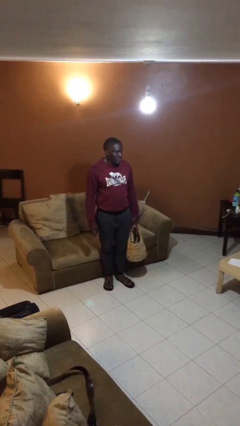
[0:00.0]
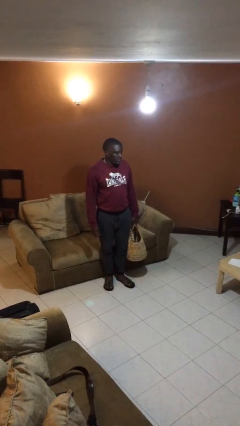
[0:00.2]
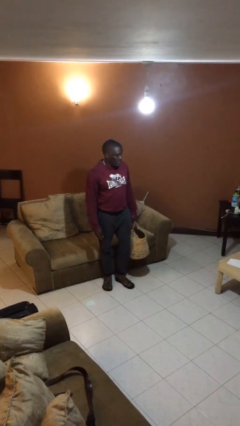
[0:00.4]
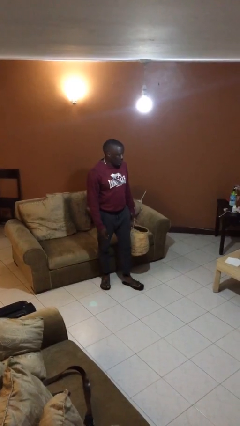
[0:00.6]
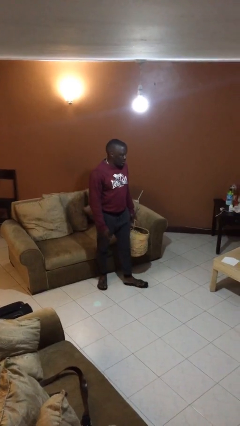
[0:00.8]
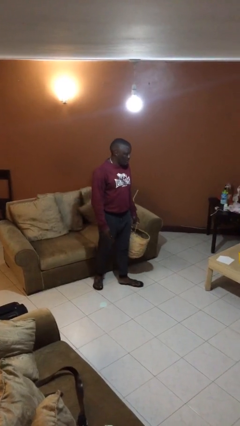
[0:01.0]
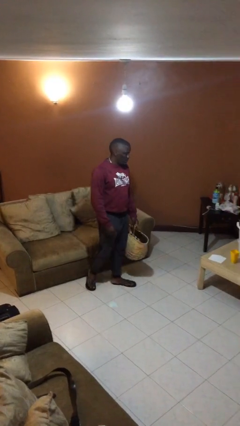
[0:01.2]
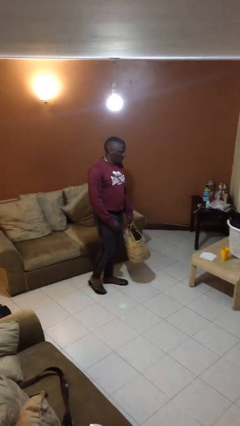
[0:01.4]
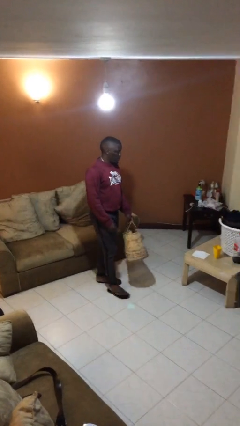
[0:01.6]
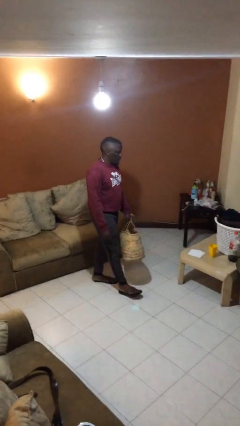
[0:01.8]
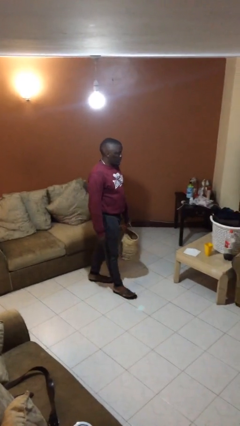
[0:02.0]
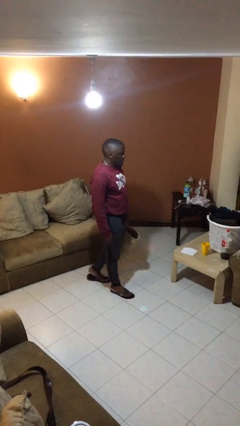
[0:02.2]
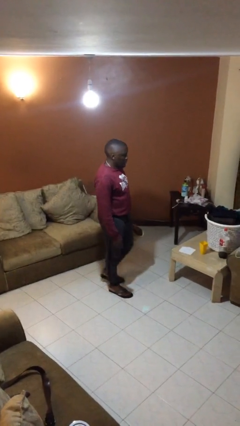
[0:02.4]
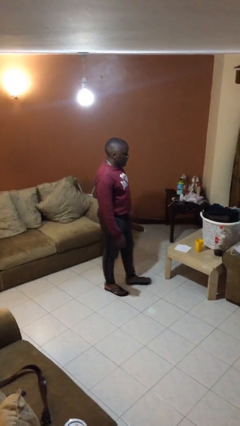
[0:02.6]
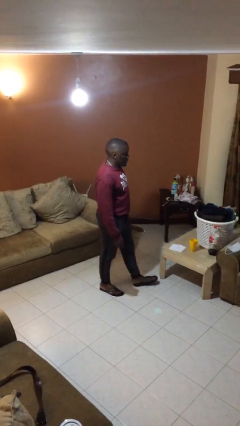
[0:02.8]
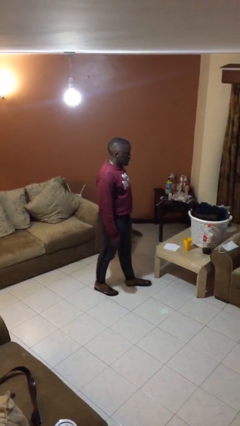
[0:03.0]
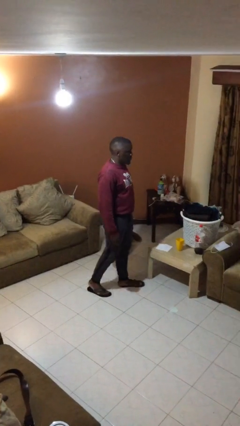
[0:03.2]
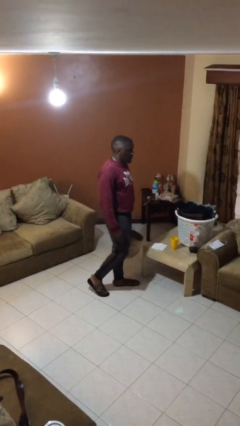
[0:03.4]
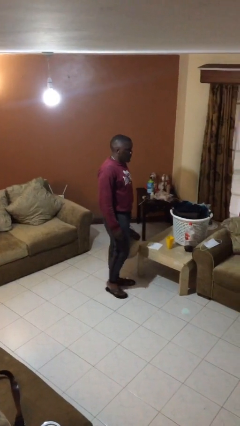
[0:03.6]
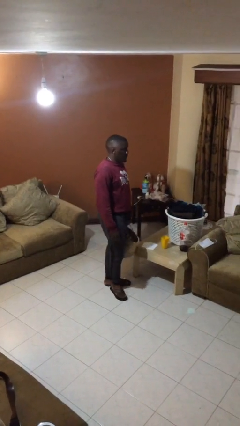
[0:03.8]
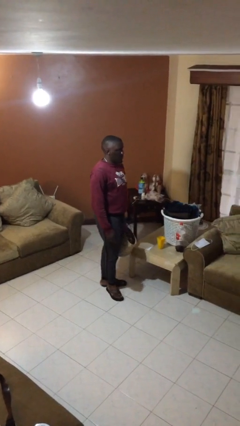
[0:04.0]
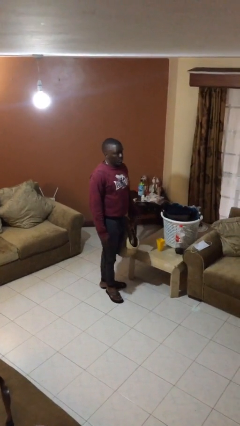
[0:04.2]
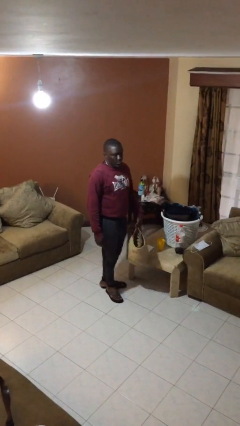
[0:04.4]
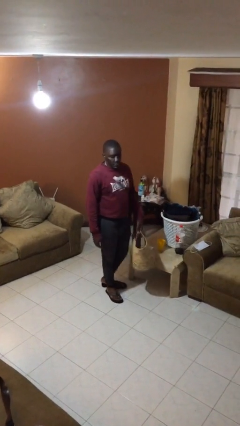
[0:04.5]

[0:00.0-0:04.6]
person carries groceries

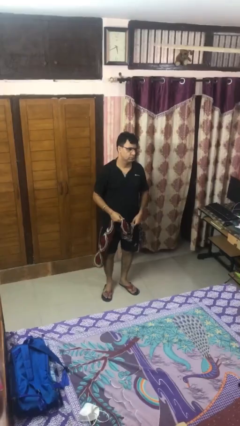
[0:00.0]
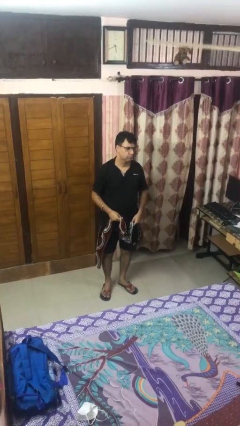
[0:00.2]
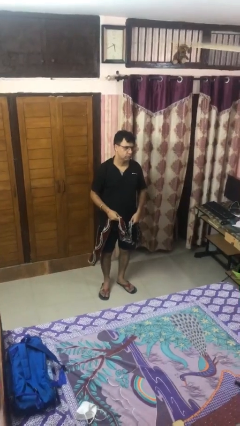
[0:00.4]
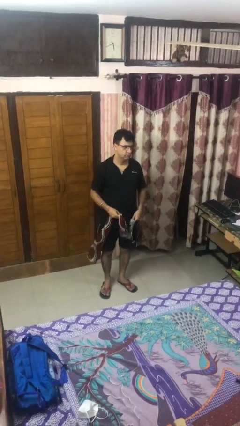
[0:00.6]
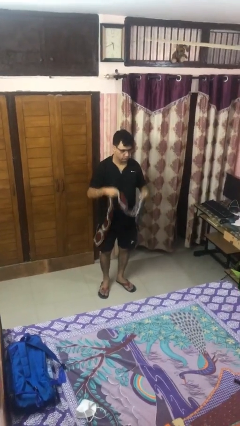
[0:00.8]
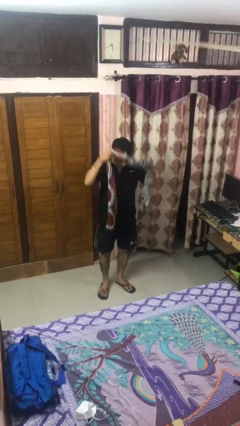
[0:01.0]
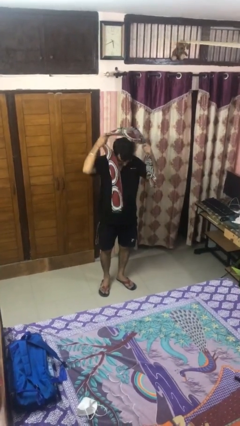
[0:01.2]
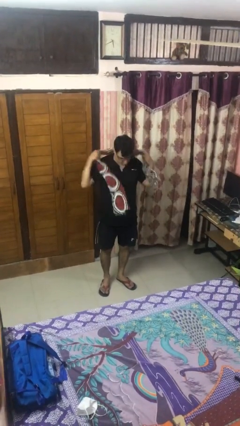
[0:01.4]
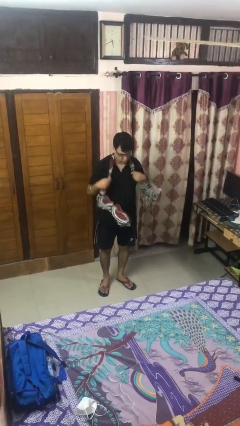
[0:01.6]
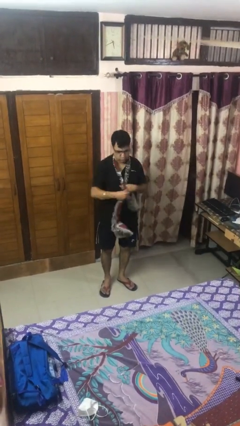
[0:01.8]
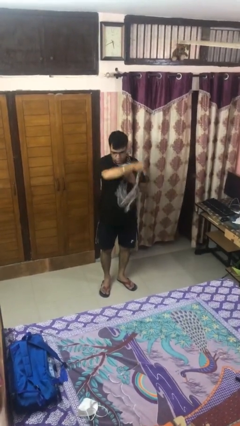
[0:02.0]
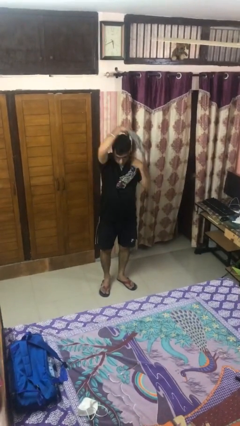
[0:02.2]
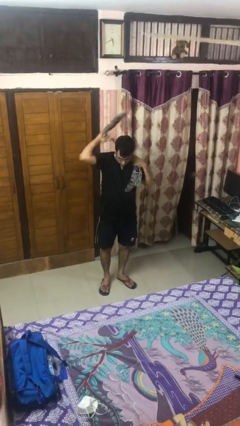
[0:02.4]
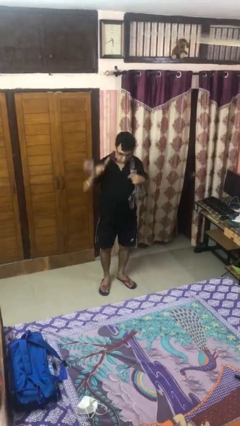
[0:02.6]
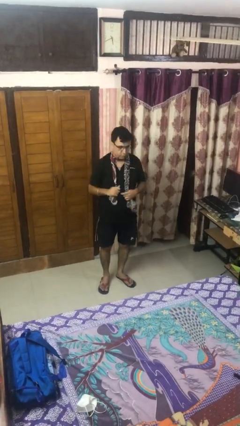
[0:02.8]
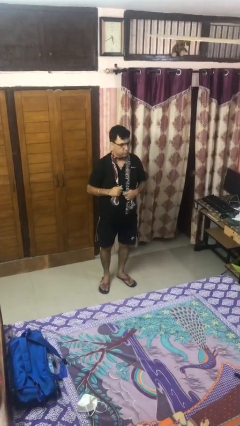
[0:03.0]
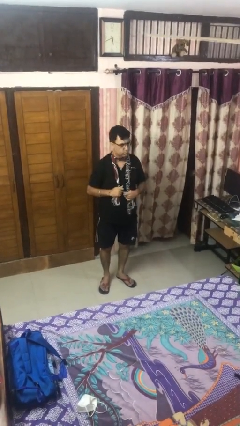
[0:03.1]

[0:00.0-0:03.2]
person puts on scarf

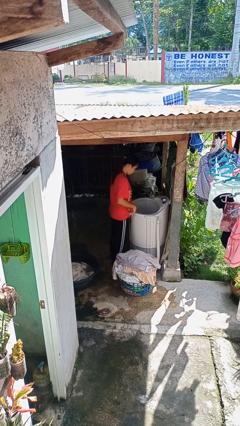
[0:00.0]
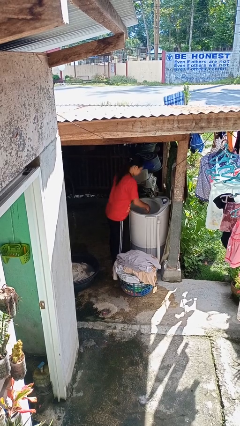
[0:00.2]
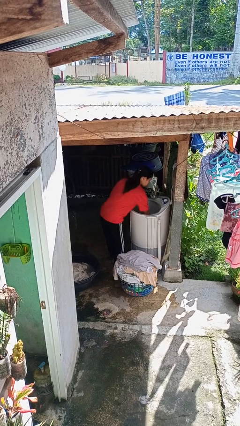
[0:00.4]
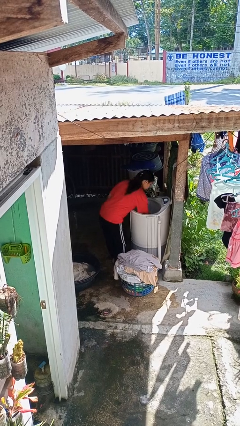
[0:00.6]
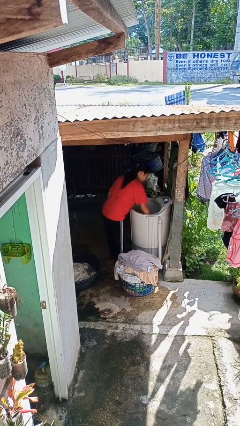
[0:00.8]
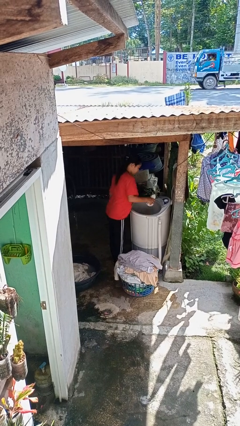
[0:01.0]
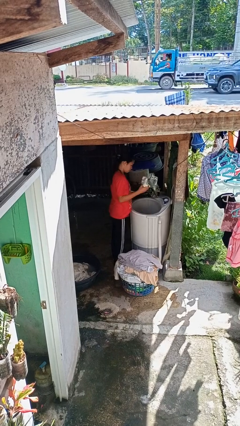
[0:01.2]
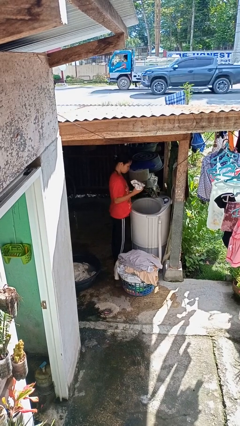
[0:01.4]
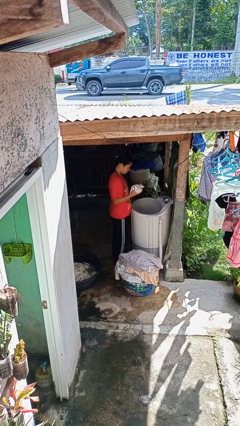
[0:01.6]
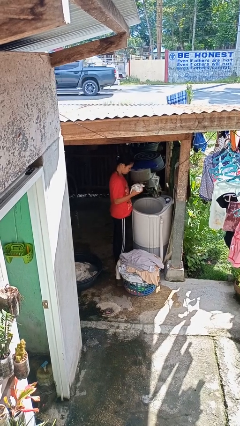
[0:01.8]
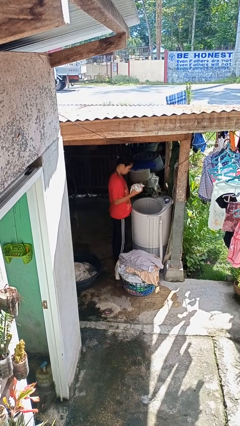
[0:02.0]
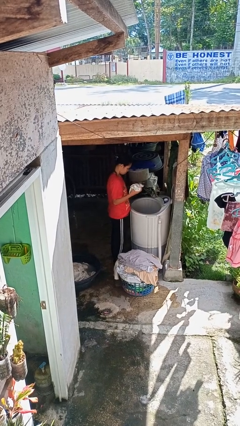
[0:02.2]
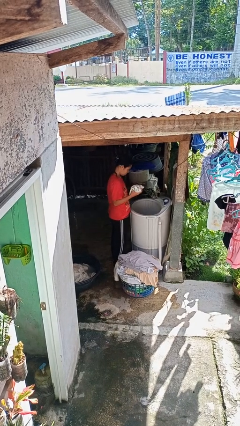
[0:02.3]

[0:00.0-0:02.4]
person unloads clotheswasher

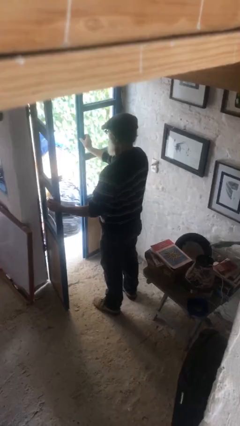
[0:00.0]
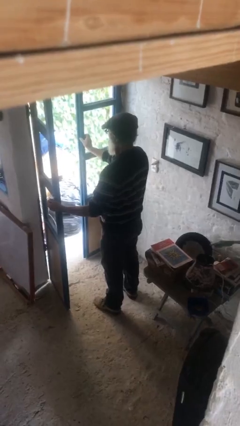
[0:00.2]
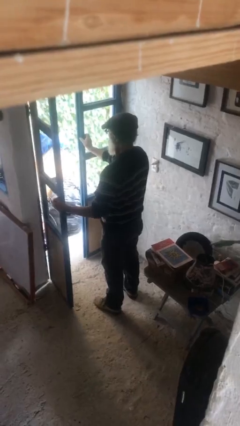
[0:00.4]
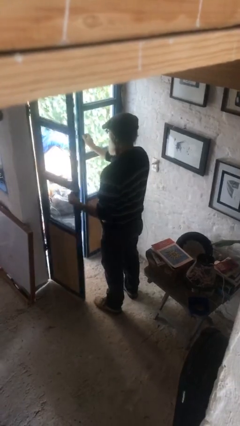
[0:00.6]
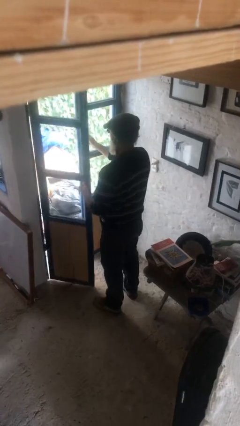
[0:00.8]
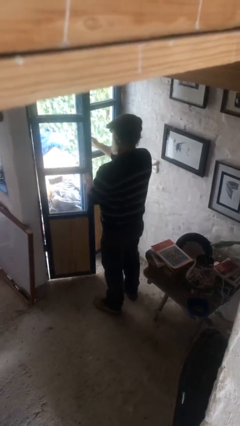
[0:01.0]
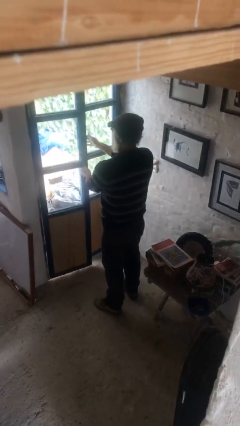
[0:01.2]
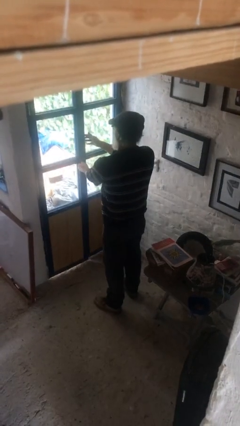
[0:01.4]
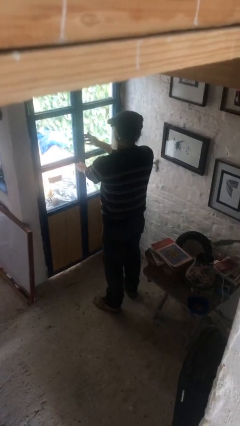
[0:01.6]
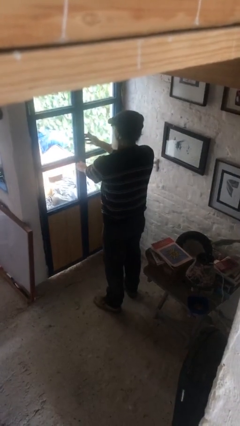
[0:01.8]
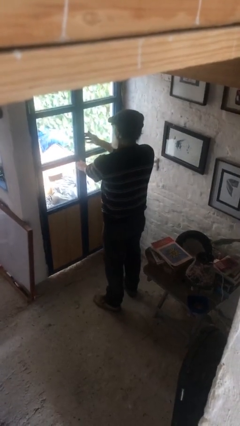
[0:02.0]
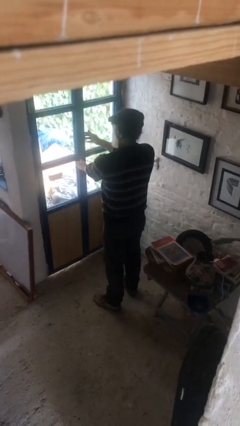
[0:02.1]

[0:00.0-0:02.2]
person closes facility door

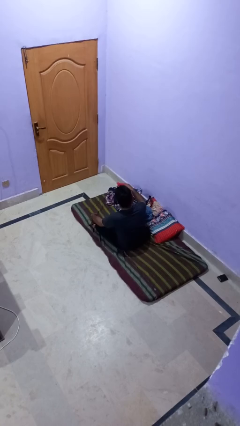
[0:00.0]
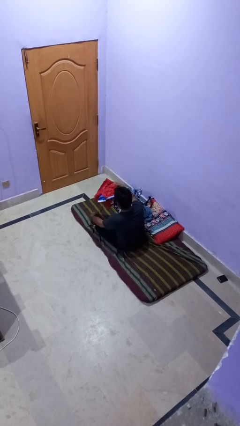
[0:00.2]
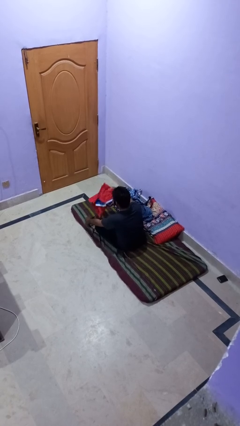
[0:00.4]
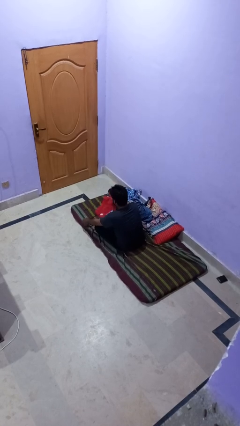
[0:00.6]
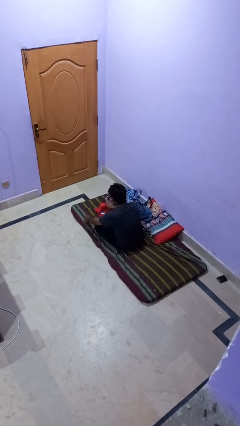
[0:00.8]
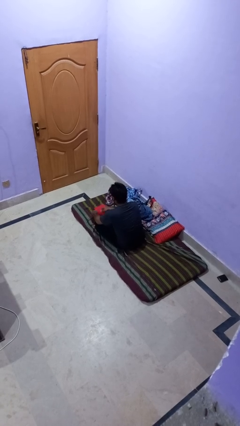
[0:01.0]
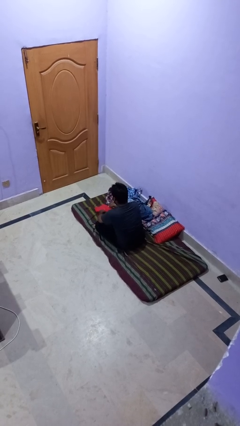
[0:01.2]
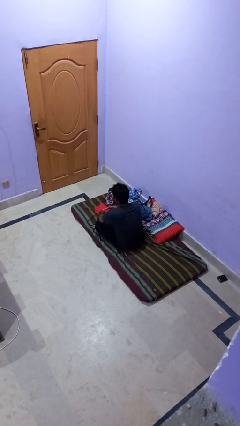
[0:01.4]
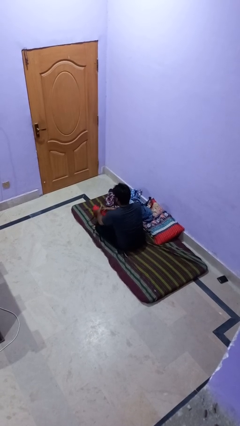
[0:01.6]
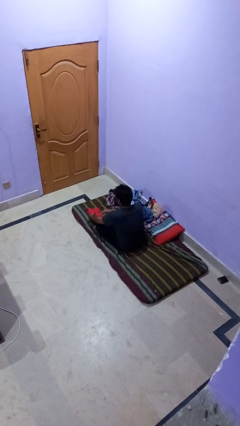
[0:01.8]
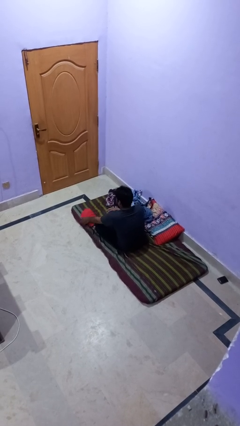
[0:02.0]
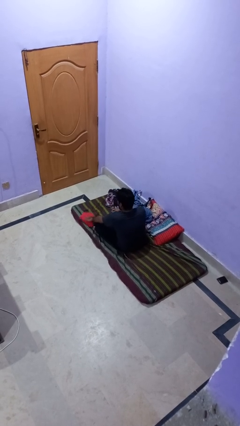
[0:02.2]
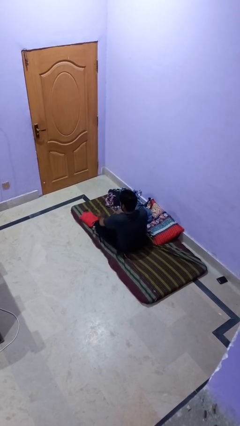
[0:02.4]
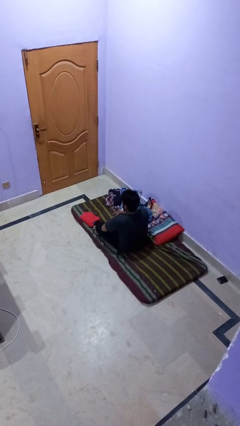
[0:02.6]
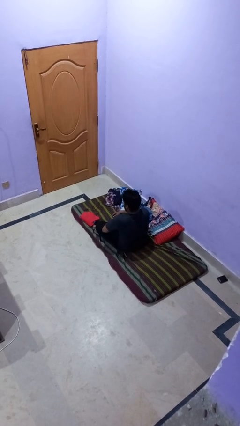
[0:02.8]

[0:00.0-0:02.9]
person folds shirt

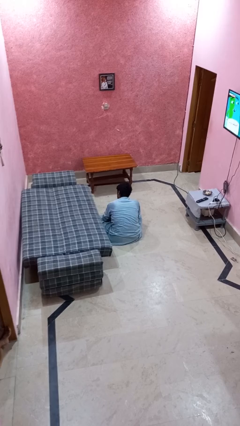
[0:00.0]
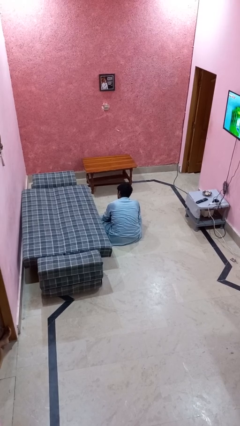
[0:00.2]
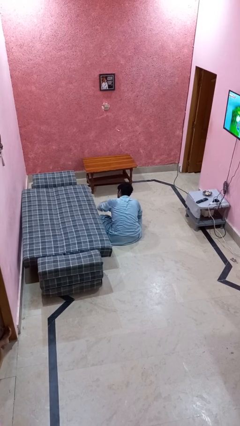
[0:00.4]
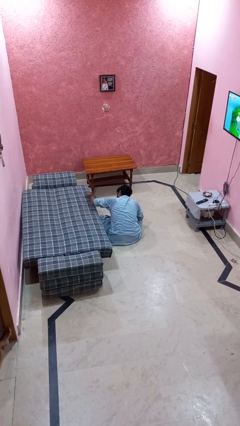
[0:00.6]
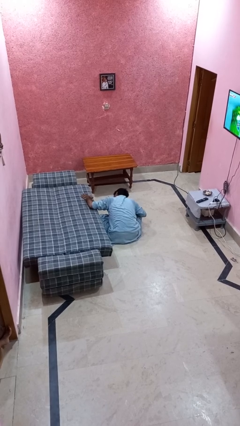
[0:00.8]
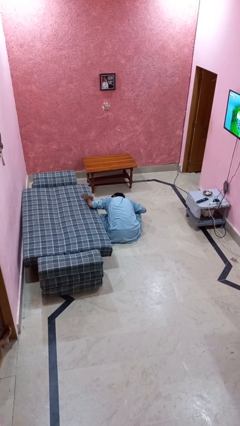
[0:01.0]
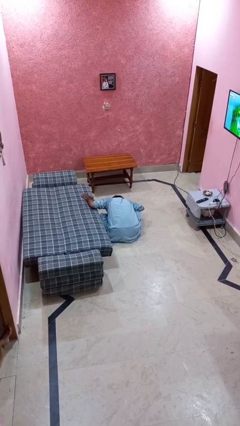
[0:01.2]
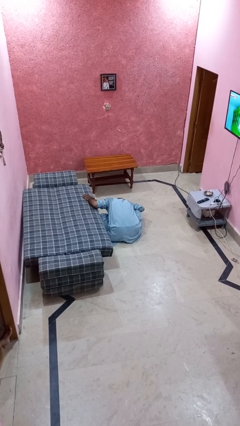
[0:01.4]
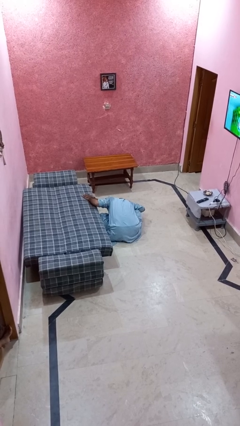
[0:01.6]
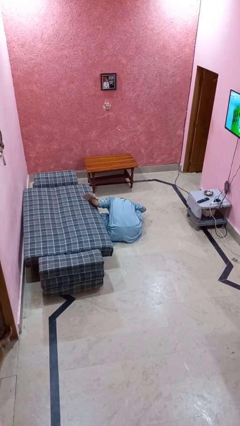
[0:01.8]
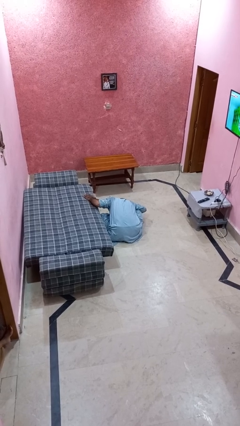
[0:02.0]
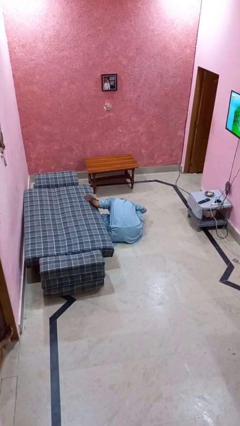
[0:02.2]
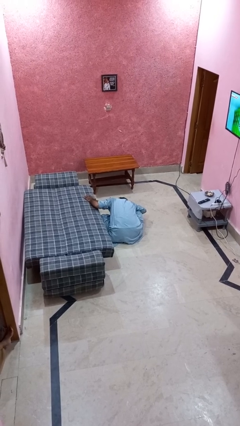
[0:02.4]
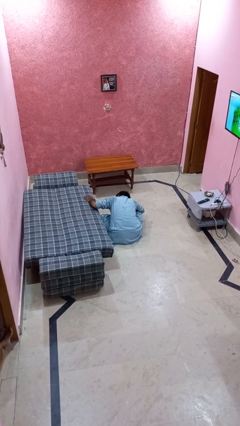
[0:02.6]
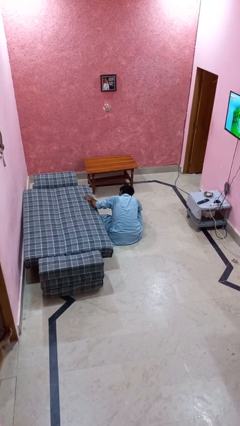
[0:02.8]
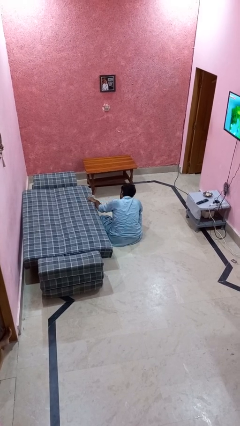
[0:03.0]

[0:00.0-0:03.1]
person searches under bed
